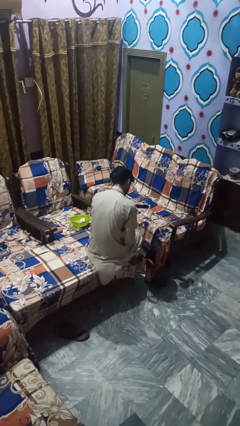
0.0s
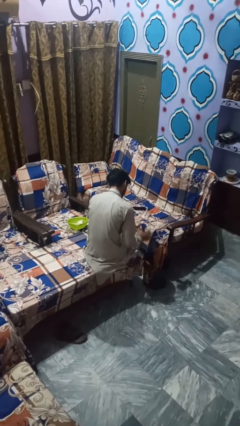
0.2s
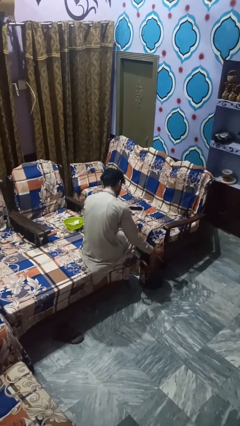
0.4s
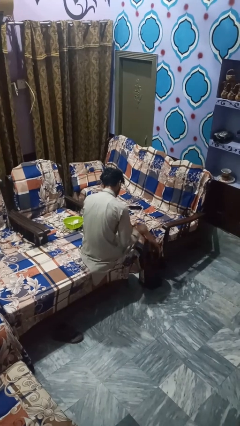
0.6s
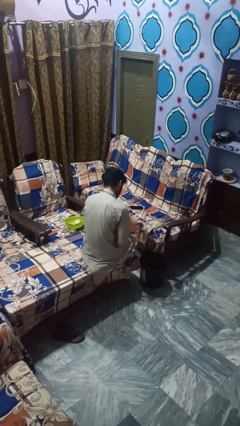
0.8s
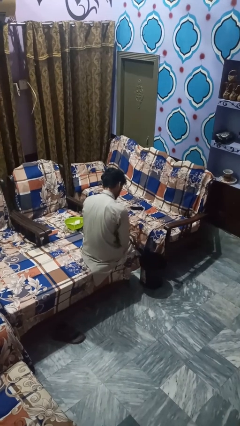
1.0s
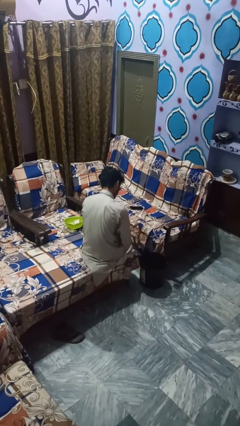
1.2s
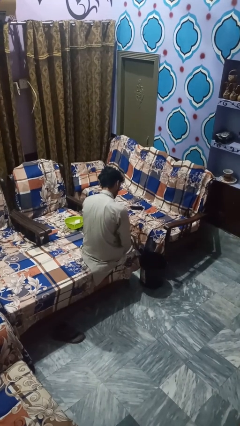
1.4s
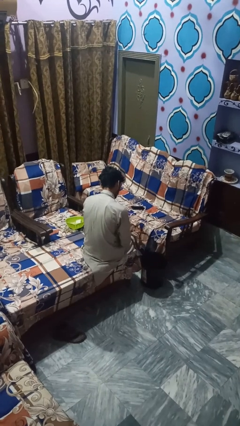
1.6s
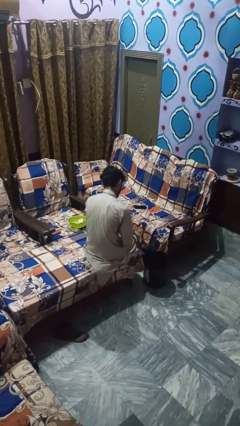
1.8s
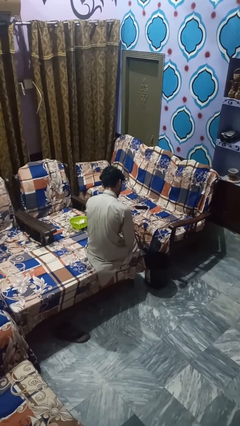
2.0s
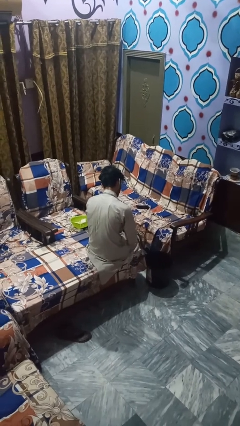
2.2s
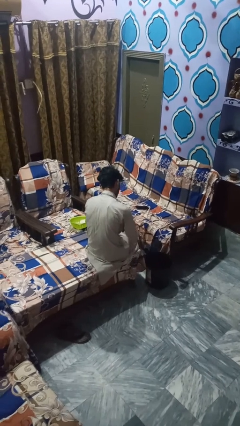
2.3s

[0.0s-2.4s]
person takes object from basket

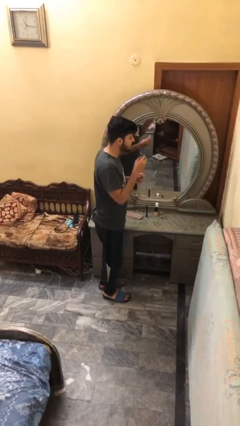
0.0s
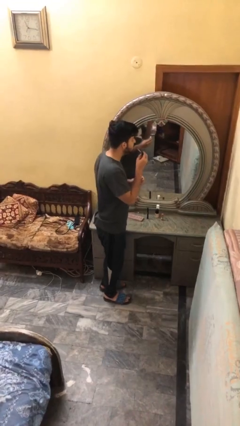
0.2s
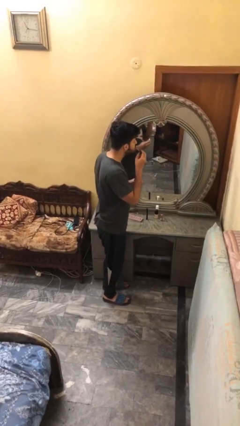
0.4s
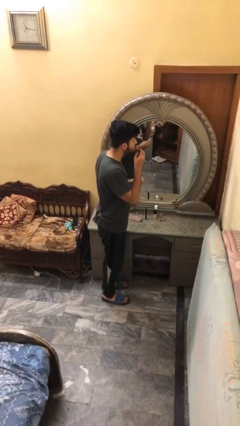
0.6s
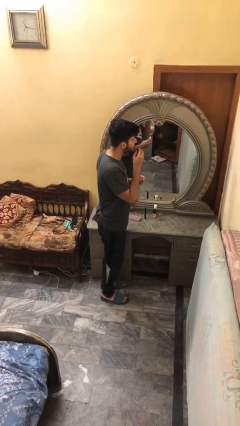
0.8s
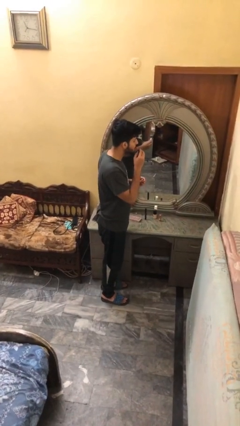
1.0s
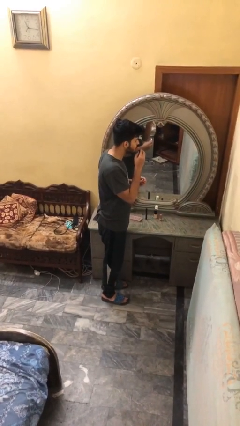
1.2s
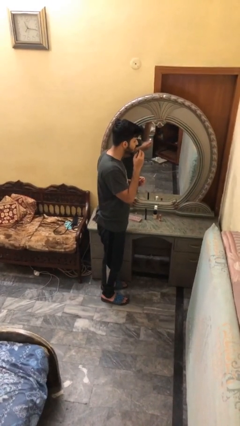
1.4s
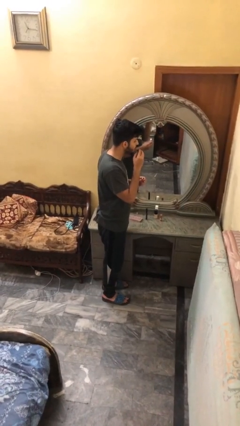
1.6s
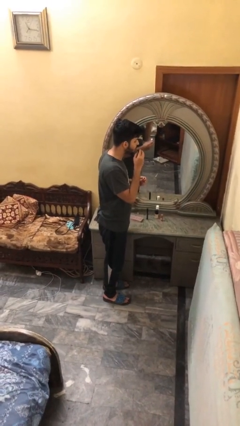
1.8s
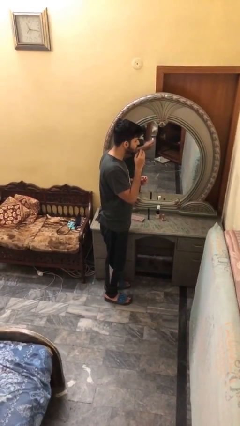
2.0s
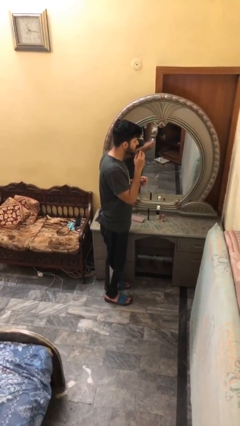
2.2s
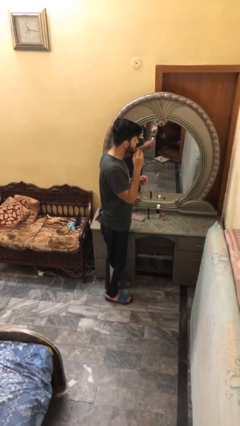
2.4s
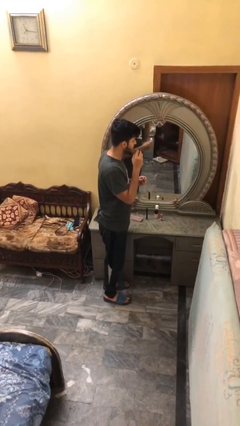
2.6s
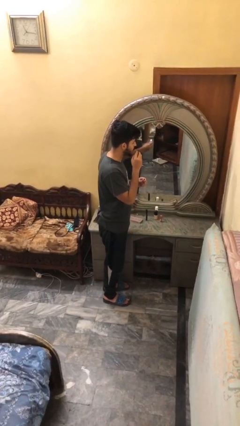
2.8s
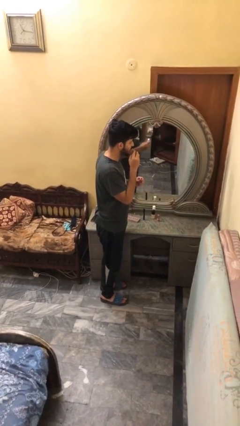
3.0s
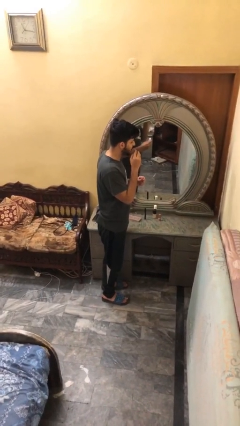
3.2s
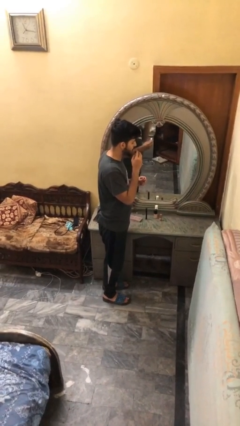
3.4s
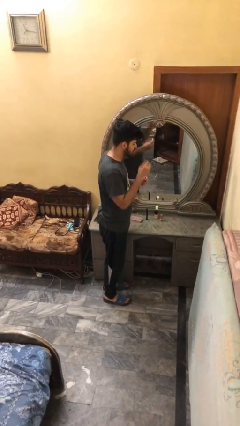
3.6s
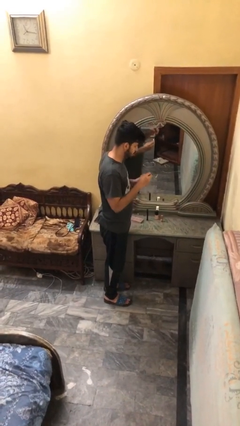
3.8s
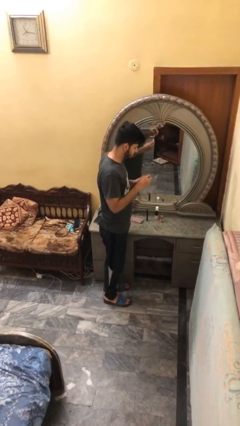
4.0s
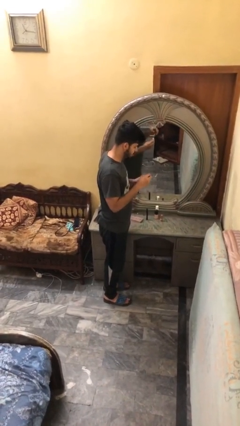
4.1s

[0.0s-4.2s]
person applies lip makeup

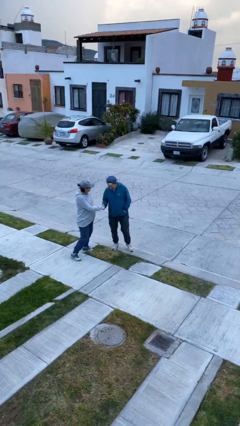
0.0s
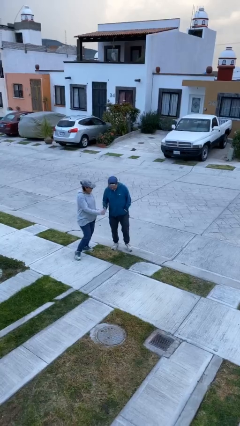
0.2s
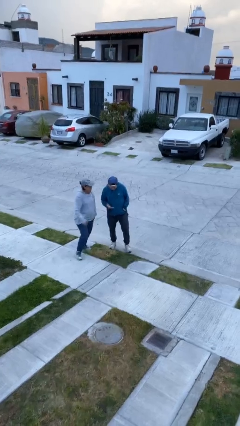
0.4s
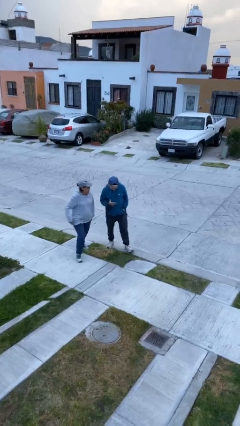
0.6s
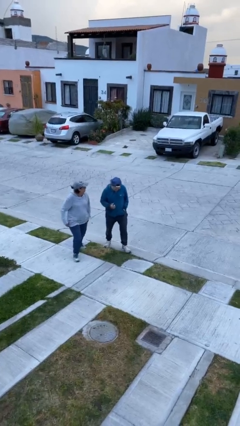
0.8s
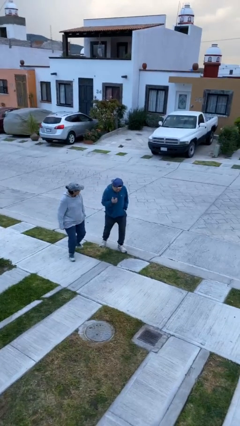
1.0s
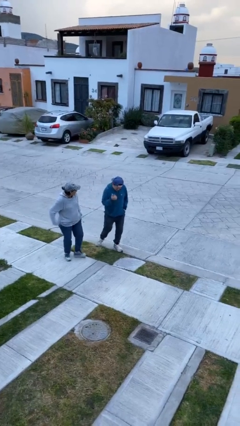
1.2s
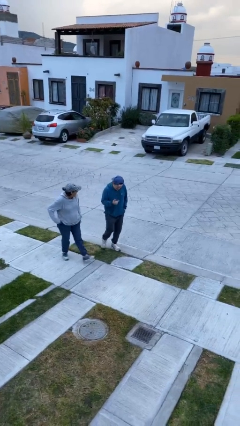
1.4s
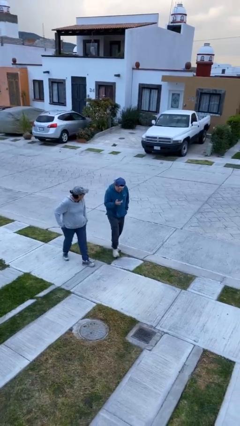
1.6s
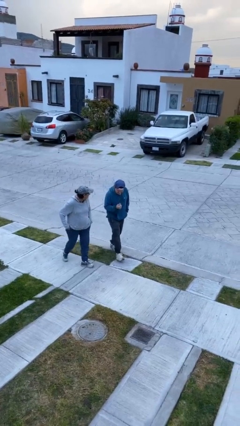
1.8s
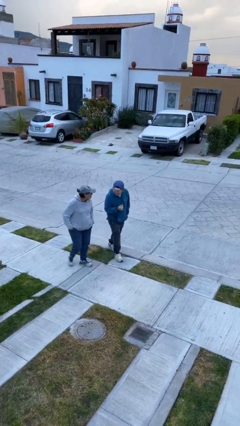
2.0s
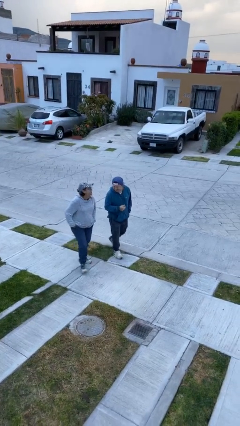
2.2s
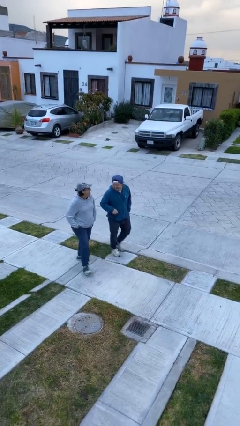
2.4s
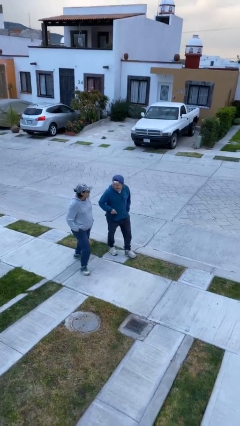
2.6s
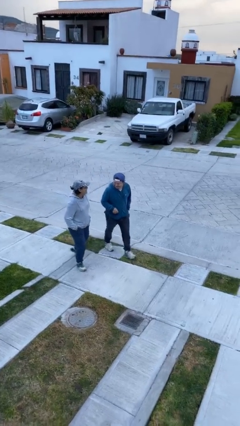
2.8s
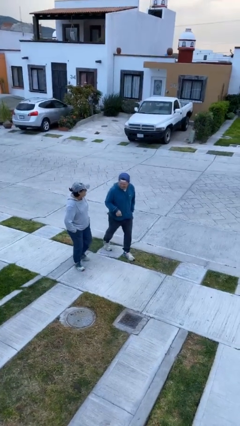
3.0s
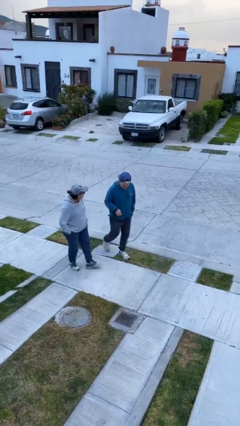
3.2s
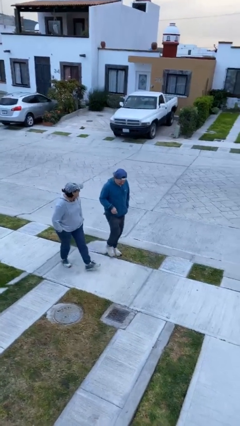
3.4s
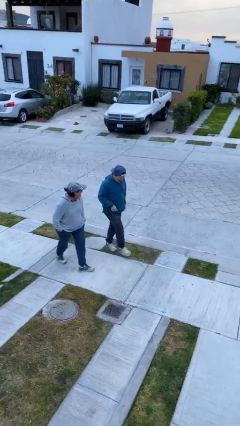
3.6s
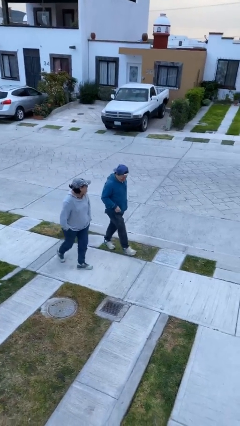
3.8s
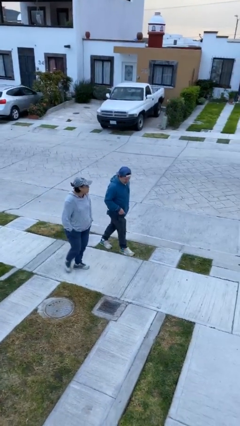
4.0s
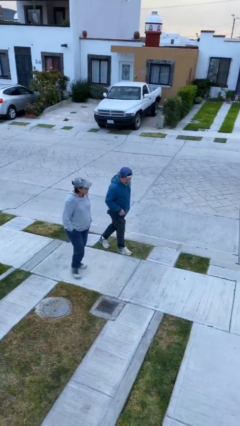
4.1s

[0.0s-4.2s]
person talks to person

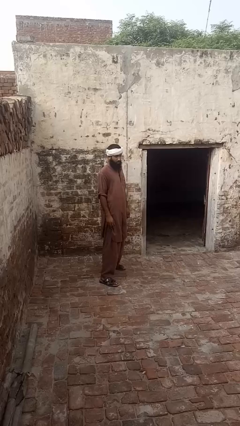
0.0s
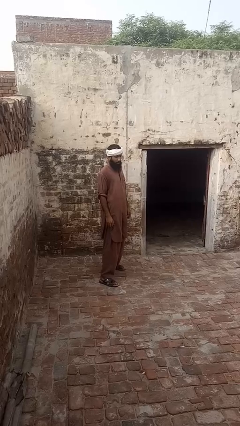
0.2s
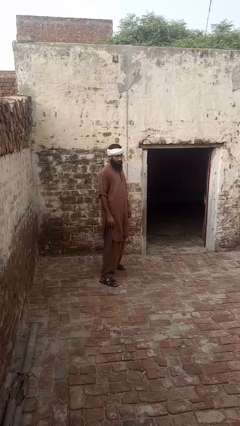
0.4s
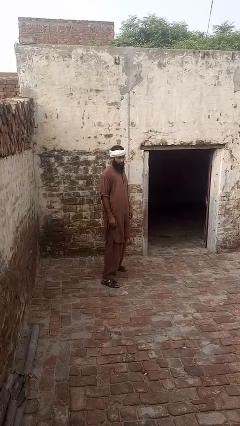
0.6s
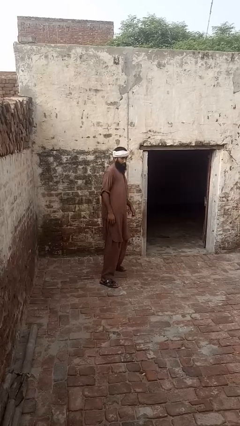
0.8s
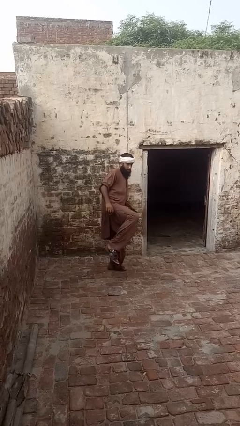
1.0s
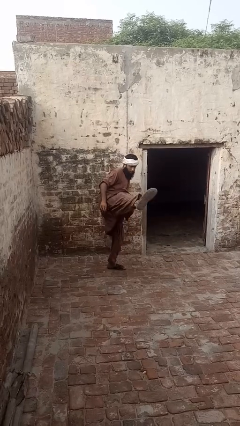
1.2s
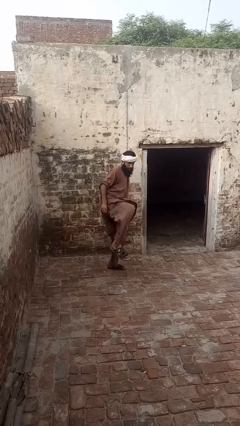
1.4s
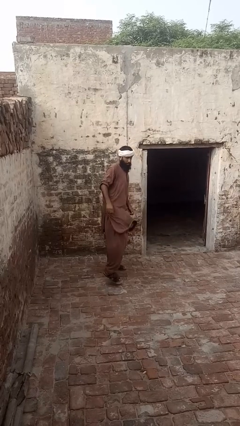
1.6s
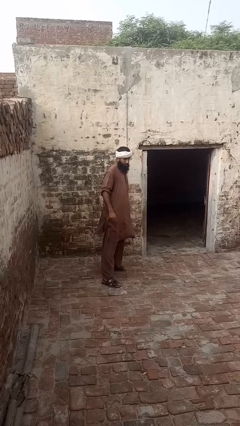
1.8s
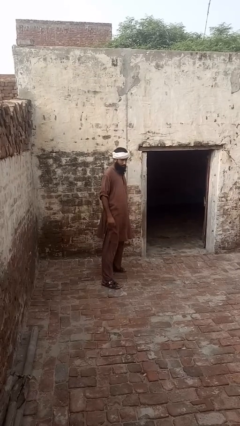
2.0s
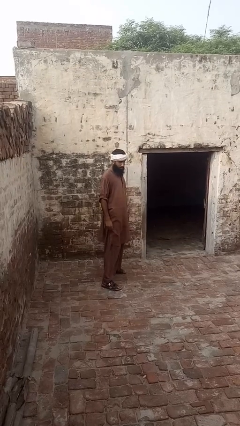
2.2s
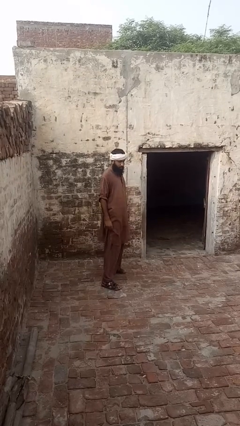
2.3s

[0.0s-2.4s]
person karate kicks

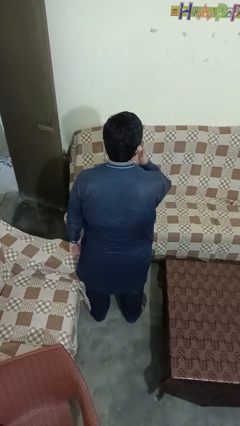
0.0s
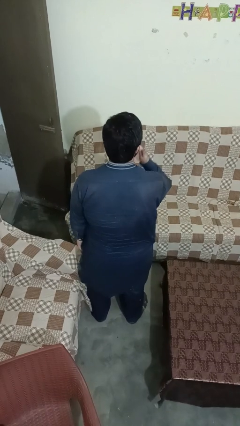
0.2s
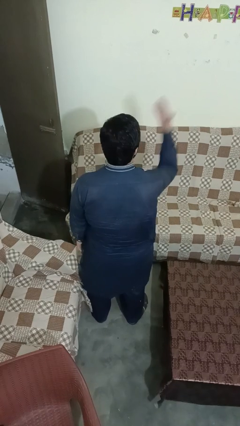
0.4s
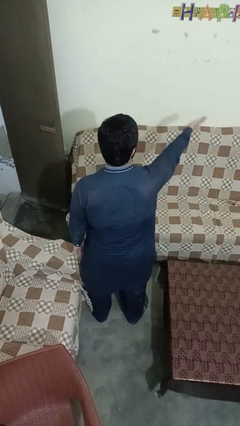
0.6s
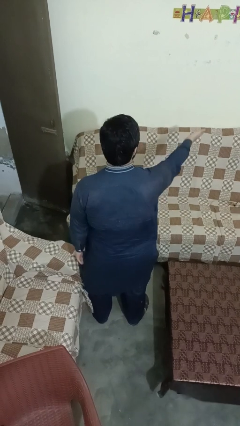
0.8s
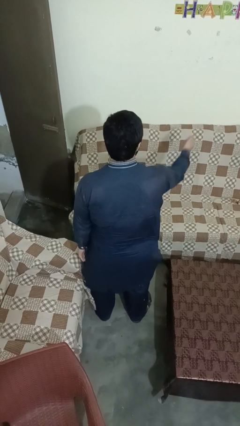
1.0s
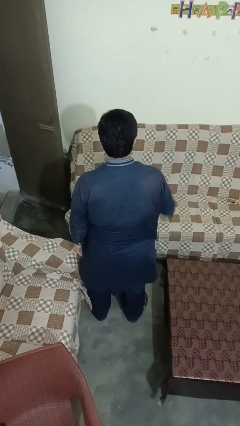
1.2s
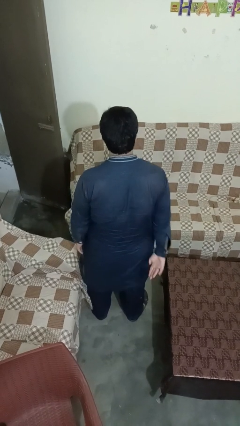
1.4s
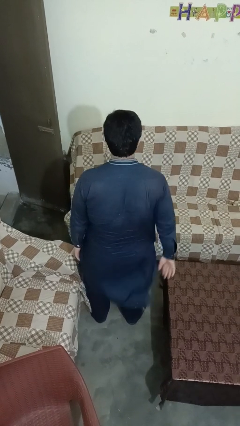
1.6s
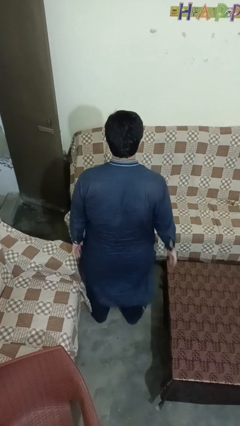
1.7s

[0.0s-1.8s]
person gestures blow kiss

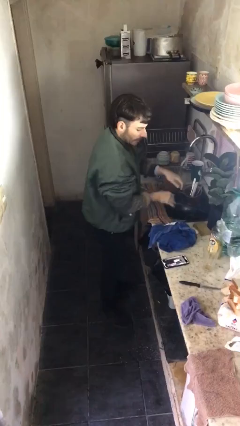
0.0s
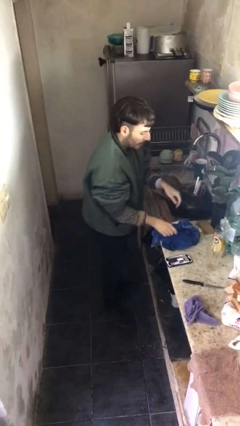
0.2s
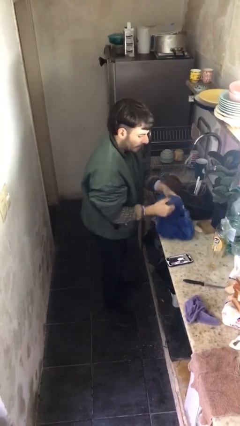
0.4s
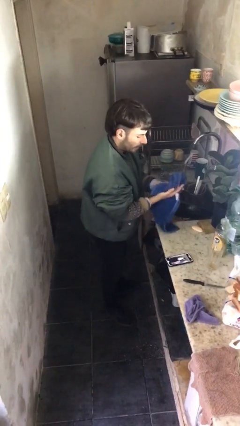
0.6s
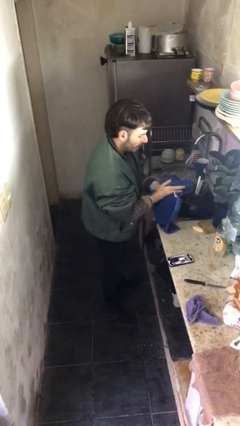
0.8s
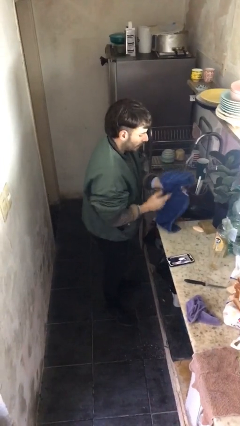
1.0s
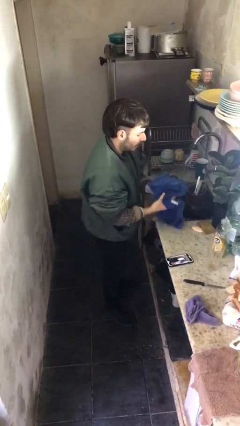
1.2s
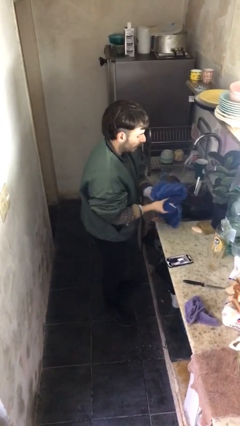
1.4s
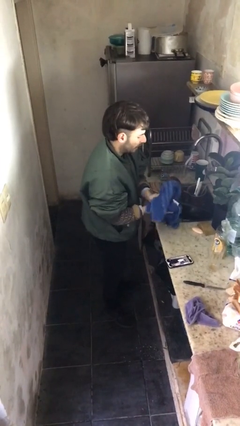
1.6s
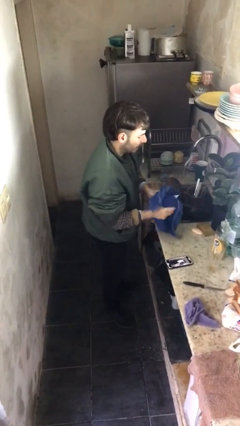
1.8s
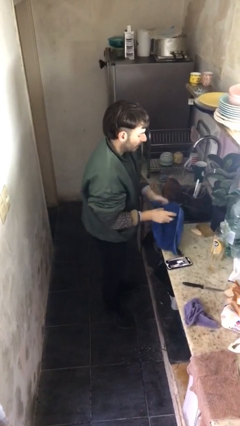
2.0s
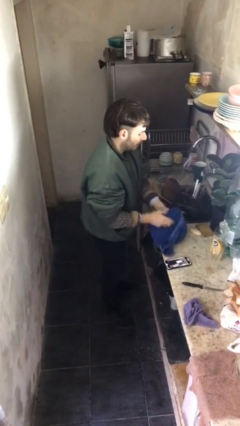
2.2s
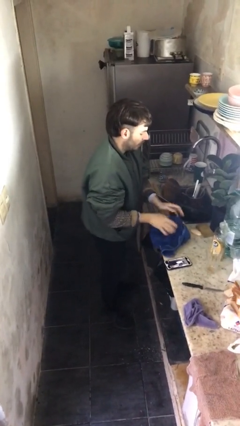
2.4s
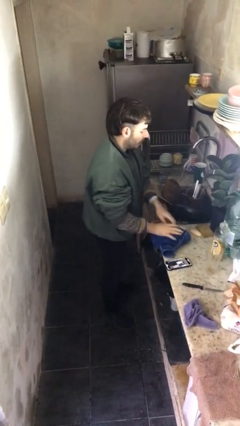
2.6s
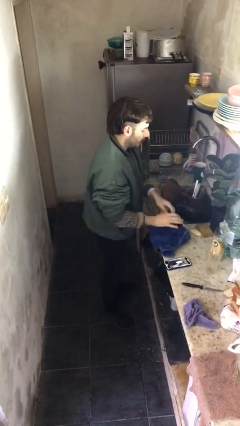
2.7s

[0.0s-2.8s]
person dries hands with towel
